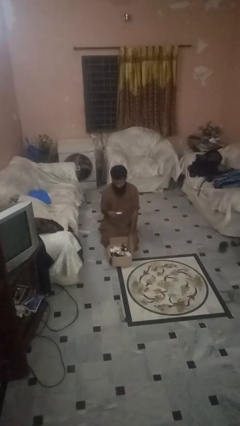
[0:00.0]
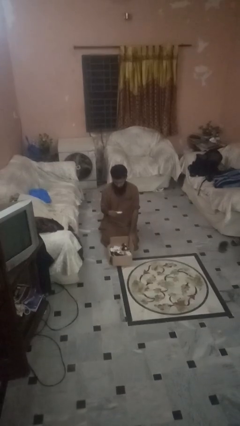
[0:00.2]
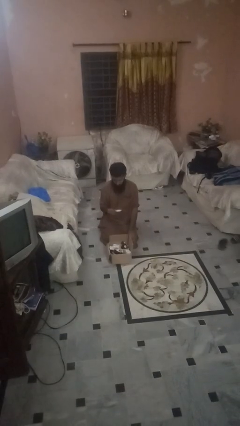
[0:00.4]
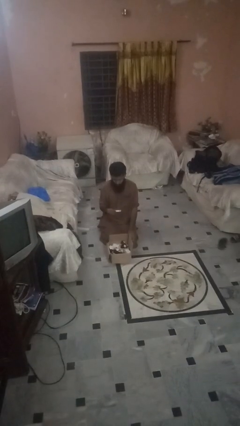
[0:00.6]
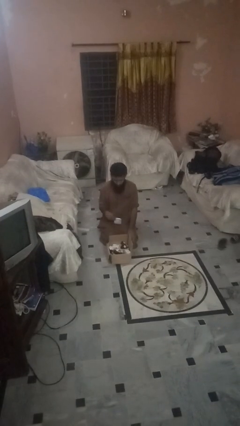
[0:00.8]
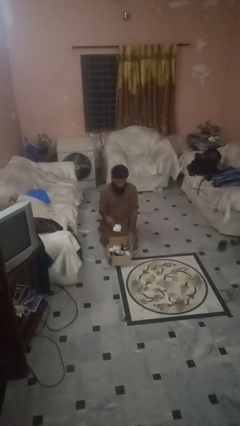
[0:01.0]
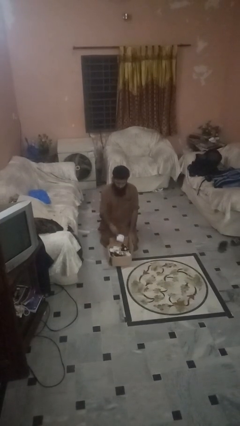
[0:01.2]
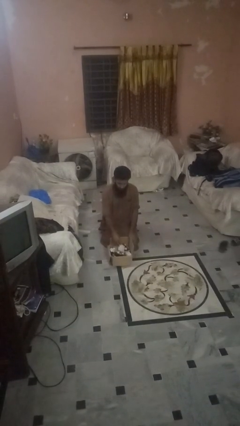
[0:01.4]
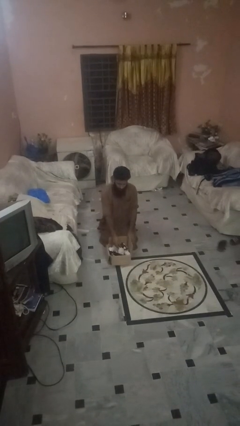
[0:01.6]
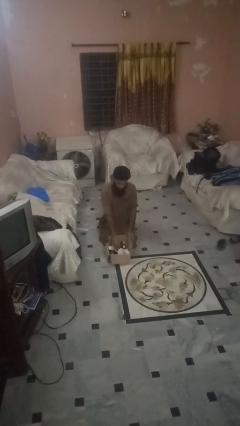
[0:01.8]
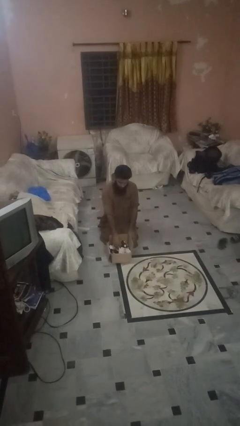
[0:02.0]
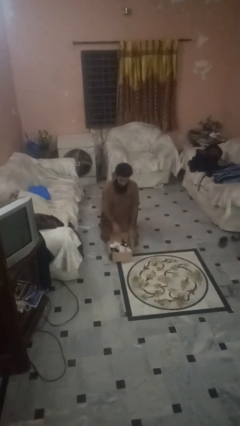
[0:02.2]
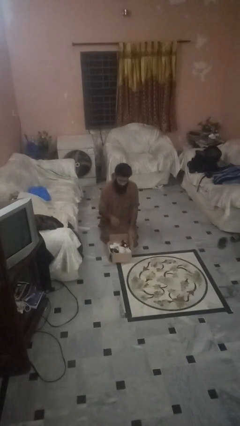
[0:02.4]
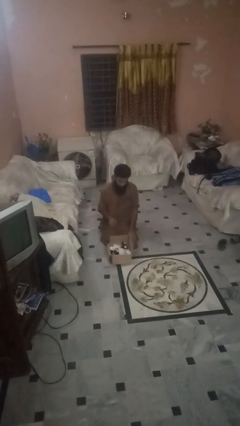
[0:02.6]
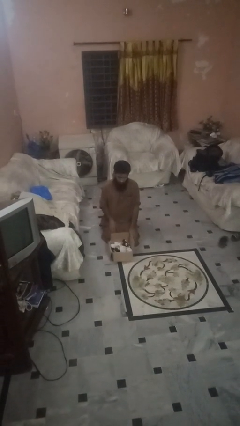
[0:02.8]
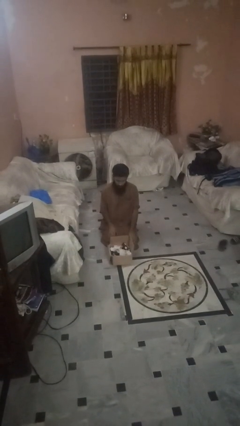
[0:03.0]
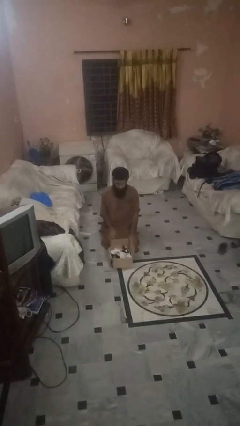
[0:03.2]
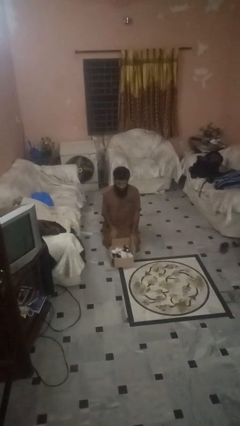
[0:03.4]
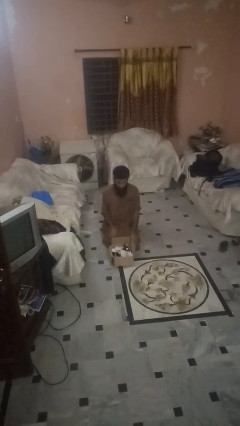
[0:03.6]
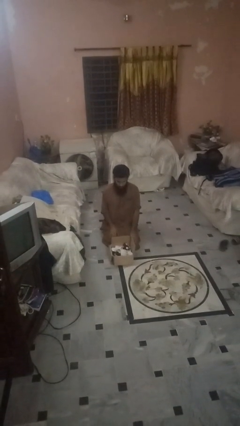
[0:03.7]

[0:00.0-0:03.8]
person puts object into box

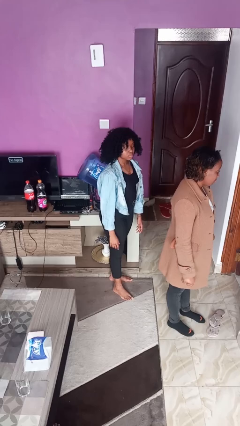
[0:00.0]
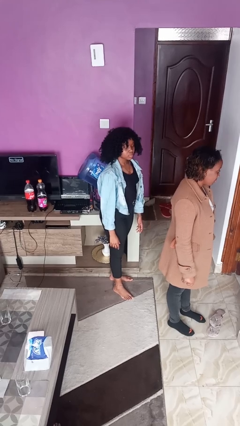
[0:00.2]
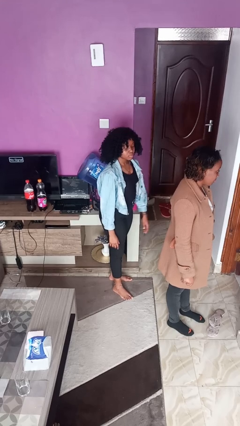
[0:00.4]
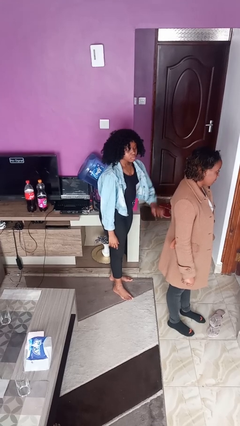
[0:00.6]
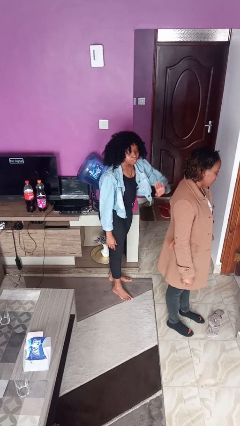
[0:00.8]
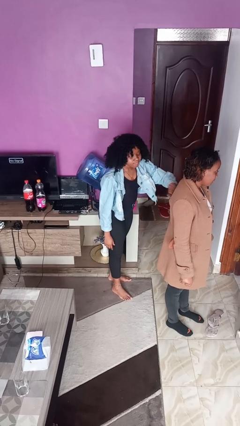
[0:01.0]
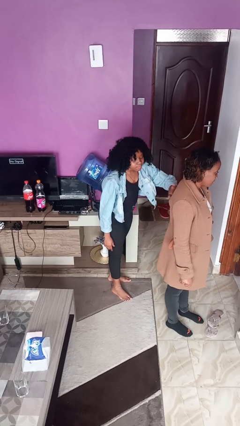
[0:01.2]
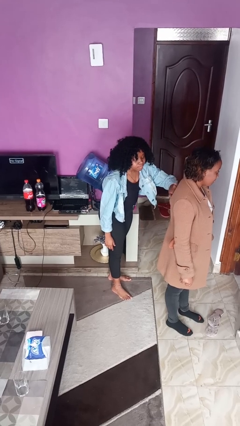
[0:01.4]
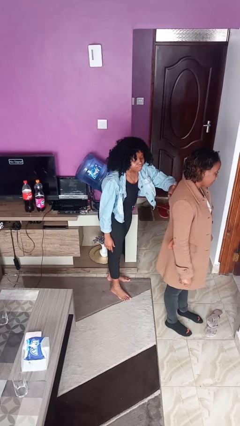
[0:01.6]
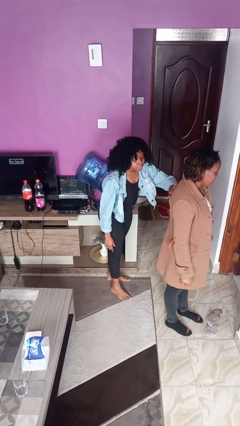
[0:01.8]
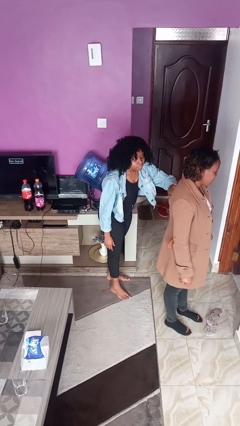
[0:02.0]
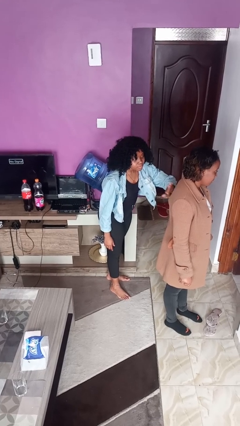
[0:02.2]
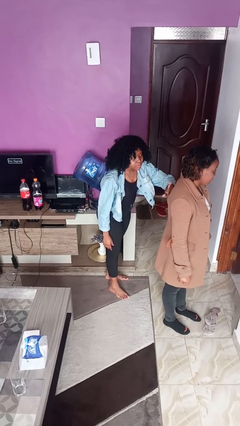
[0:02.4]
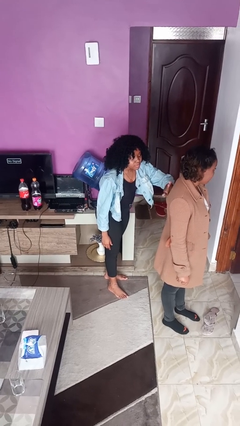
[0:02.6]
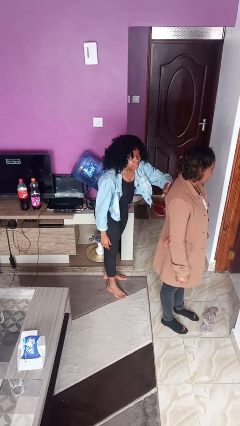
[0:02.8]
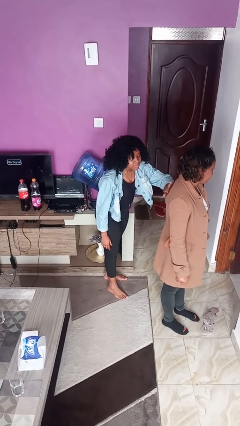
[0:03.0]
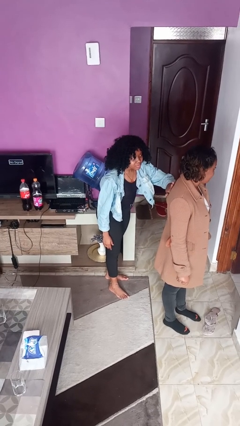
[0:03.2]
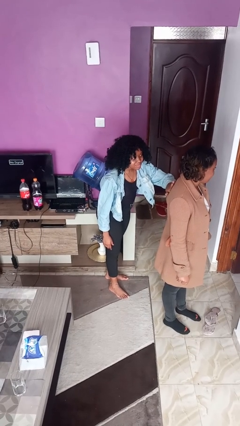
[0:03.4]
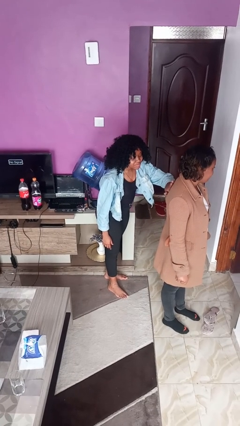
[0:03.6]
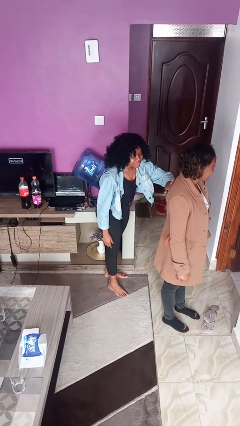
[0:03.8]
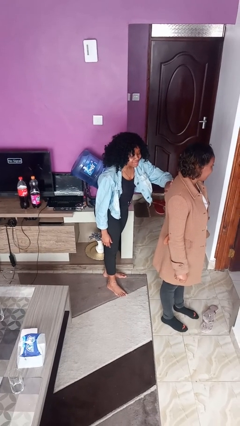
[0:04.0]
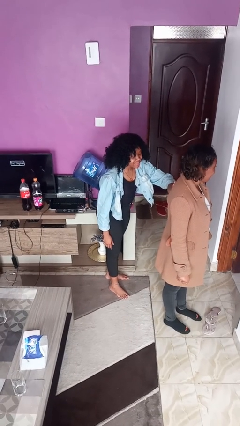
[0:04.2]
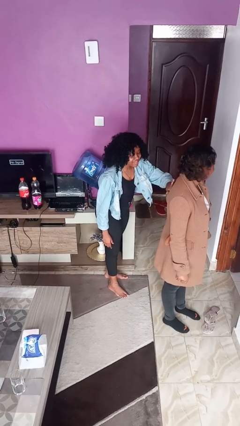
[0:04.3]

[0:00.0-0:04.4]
person touches back of person

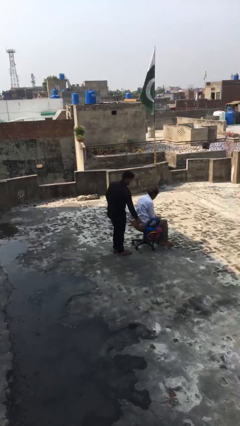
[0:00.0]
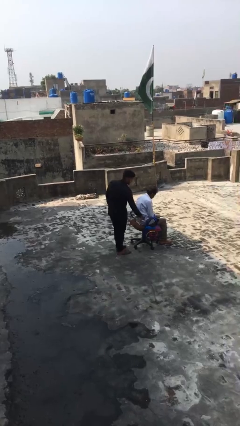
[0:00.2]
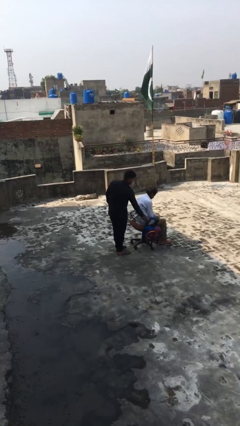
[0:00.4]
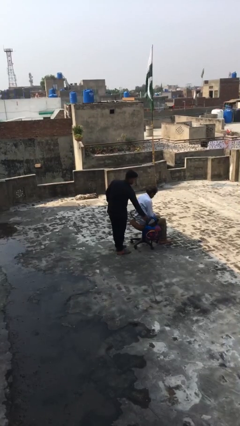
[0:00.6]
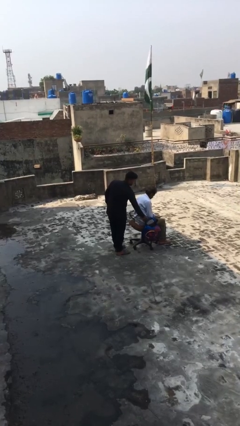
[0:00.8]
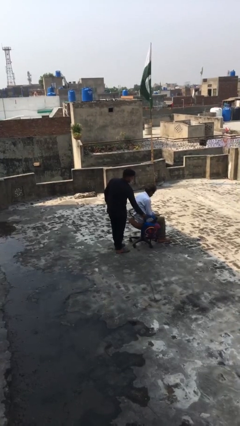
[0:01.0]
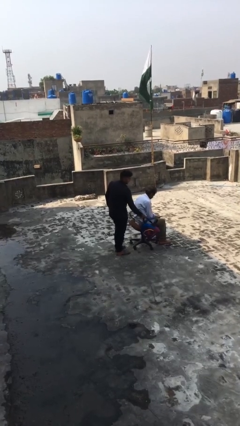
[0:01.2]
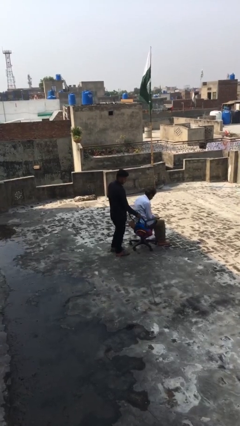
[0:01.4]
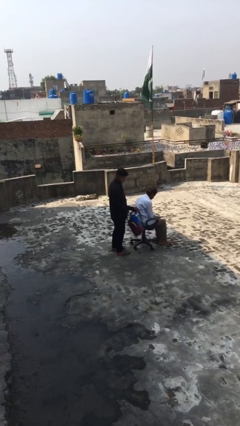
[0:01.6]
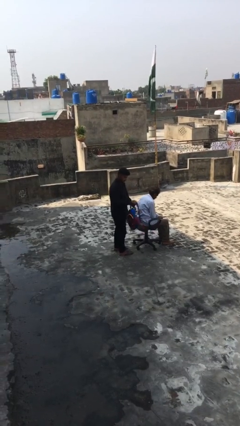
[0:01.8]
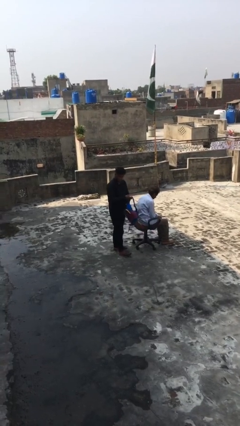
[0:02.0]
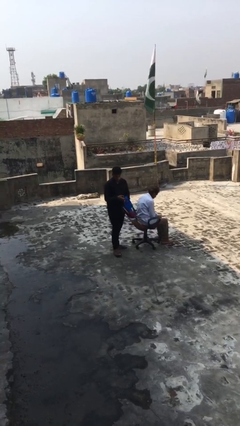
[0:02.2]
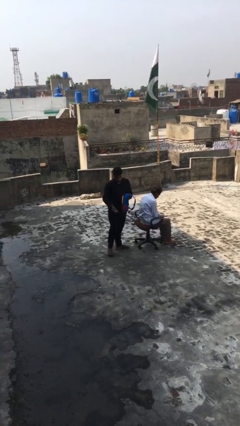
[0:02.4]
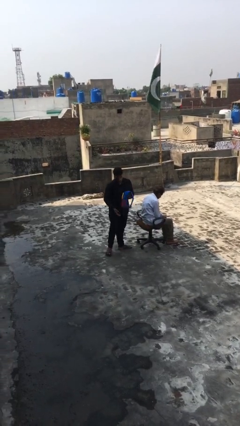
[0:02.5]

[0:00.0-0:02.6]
person steals object from person

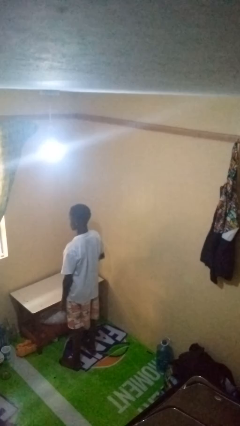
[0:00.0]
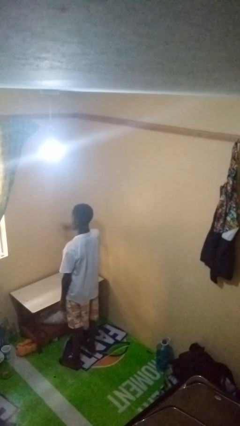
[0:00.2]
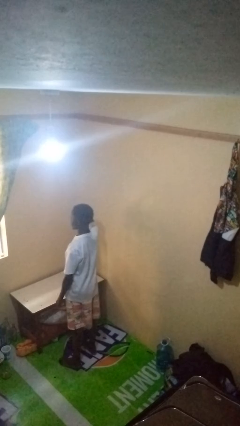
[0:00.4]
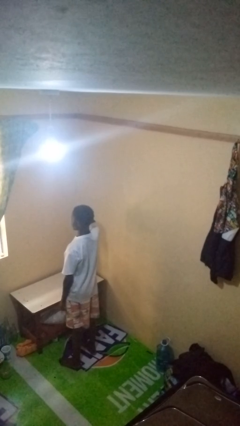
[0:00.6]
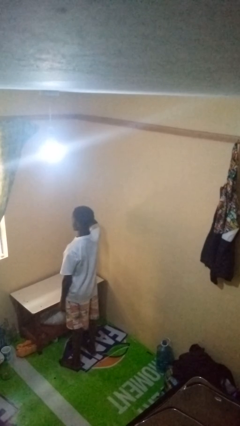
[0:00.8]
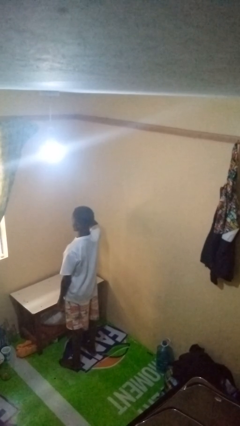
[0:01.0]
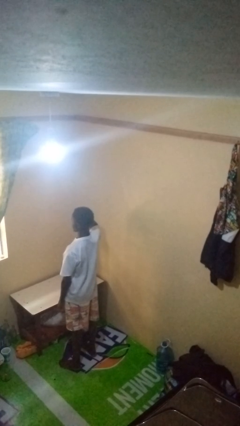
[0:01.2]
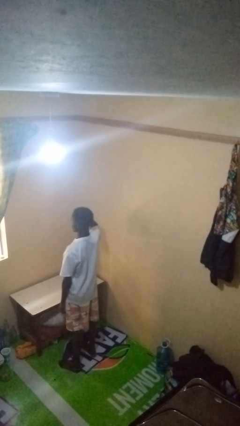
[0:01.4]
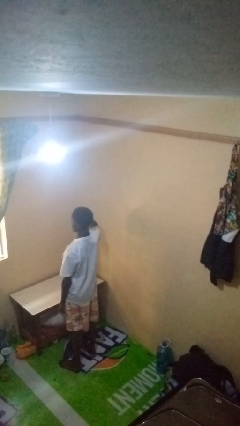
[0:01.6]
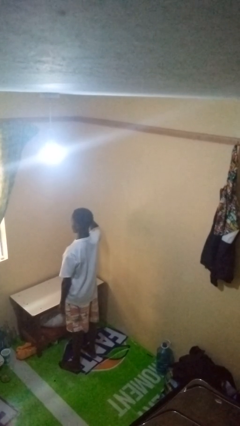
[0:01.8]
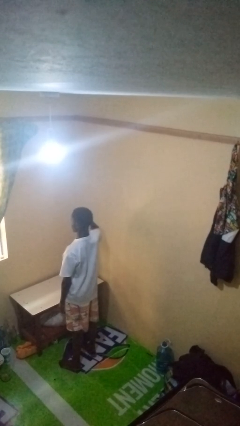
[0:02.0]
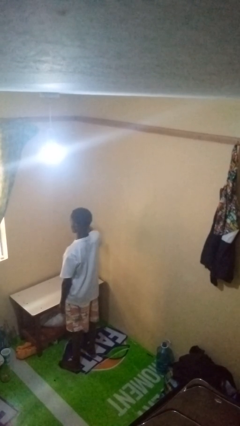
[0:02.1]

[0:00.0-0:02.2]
person salutes

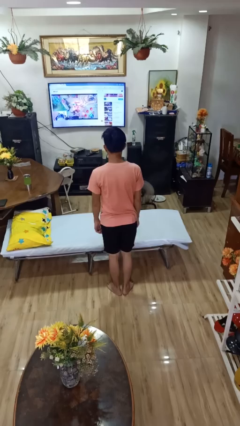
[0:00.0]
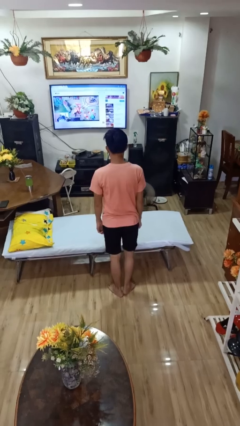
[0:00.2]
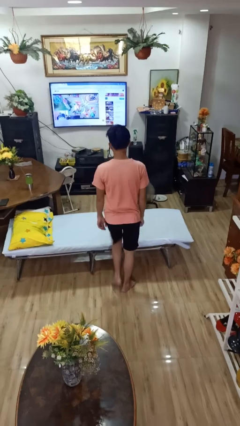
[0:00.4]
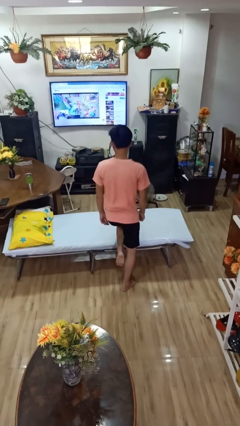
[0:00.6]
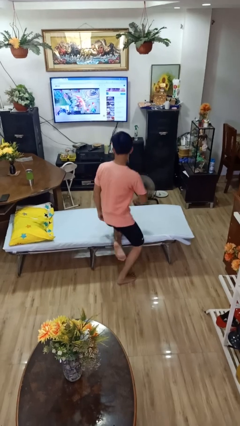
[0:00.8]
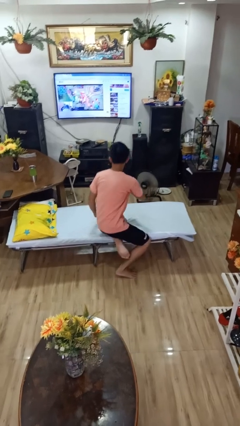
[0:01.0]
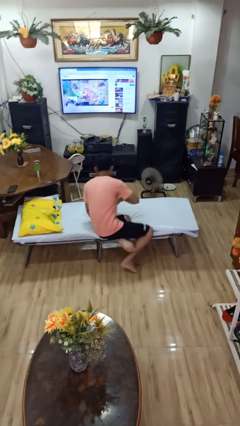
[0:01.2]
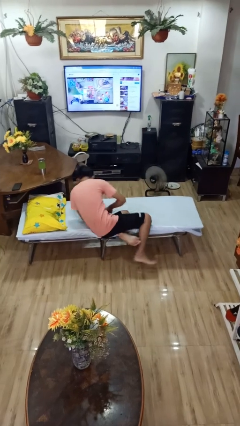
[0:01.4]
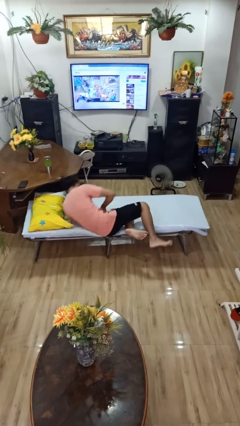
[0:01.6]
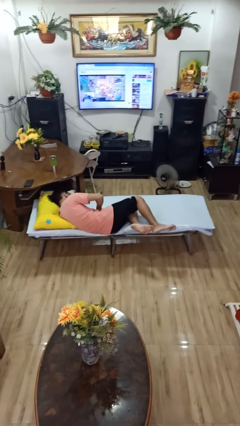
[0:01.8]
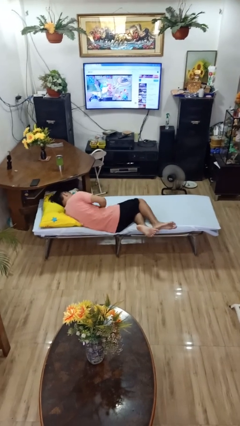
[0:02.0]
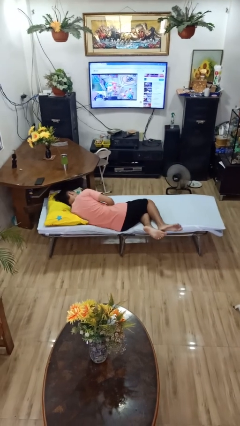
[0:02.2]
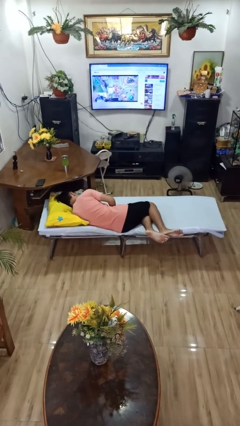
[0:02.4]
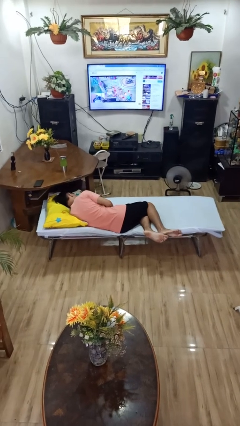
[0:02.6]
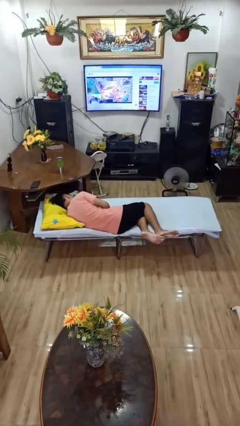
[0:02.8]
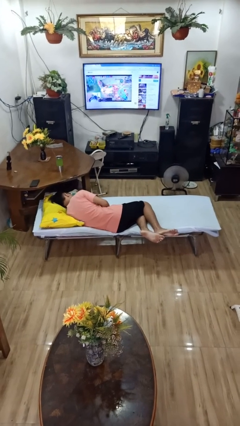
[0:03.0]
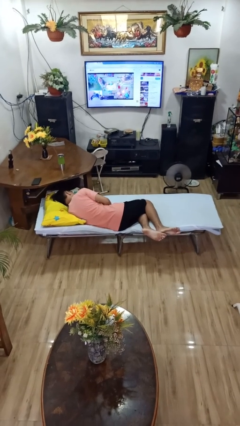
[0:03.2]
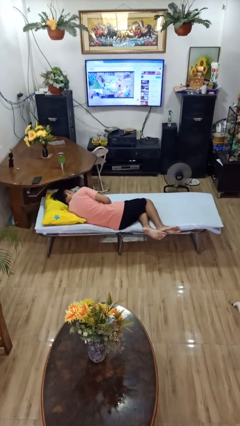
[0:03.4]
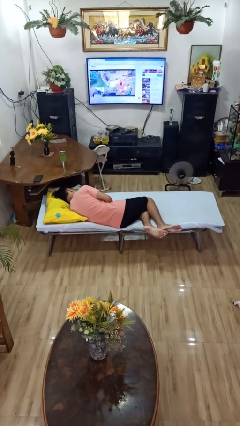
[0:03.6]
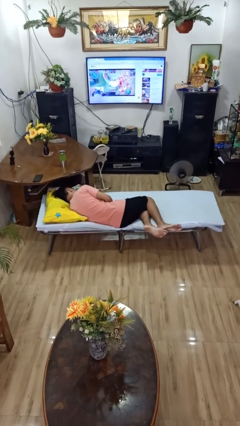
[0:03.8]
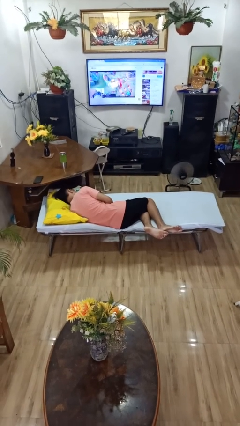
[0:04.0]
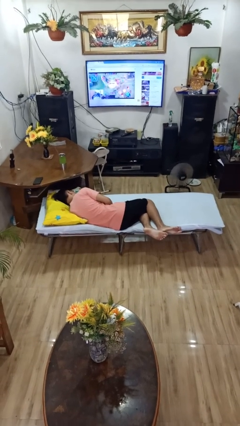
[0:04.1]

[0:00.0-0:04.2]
person lies down on bed
